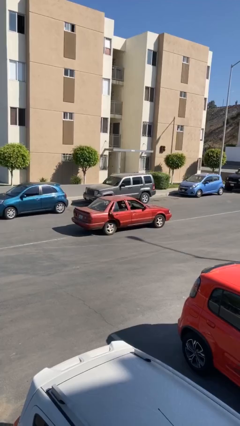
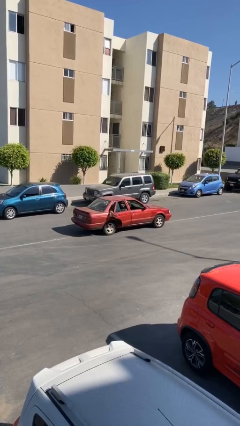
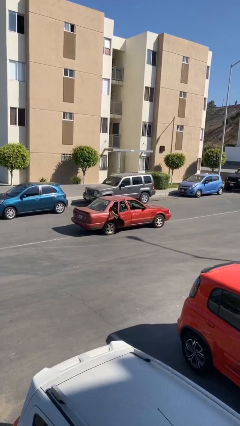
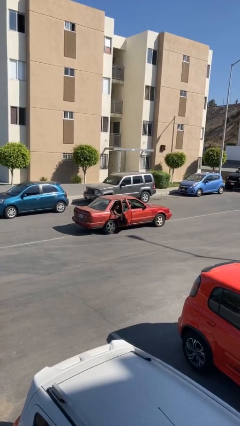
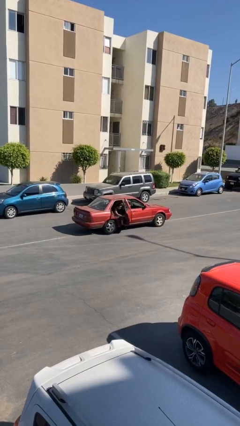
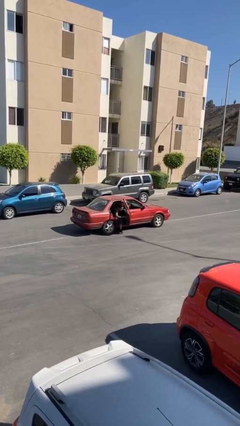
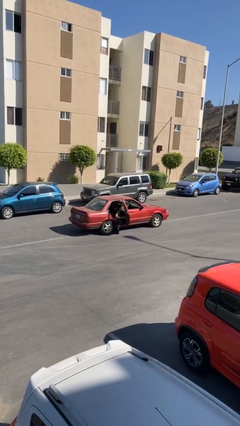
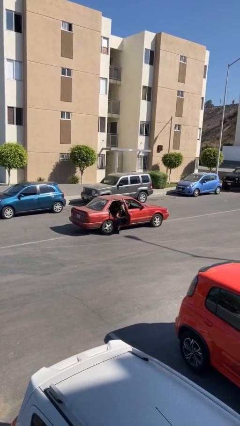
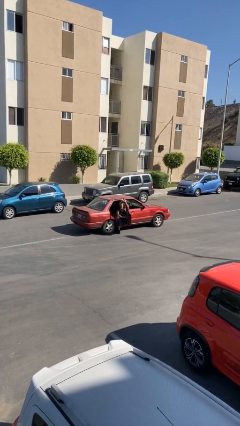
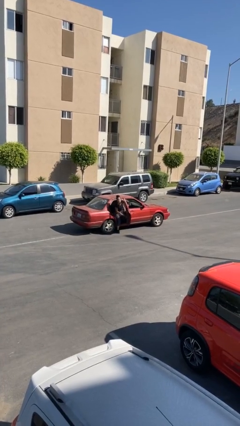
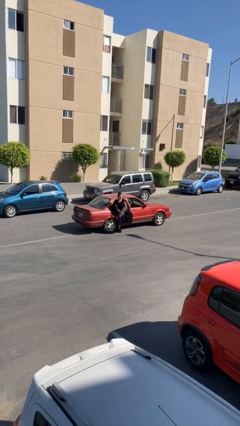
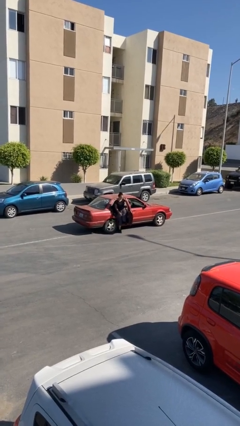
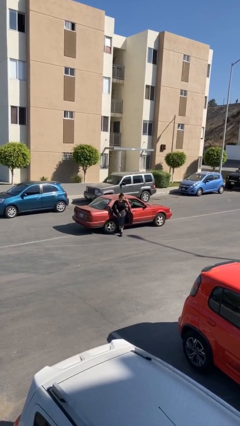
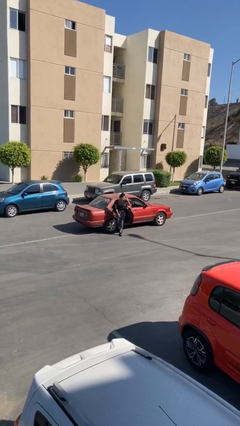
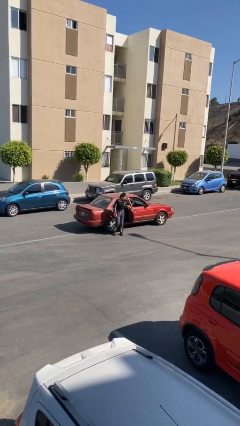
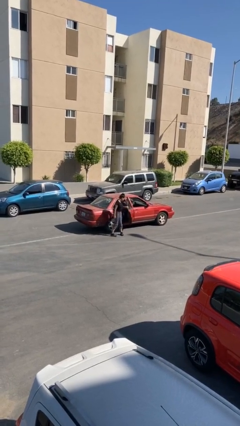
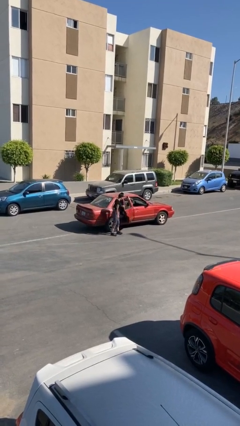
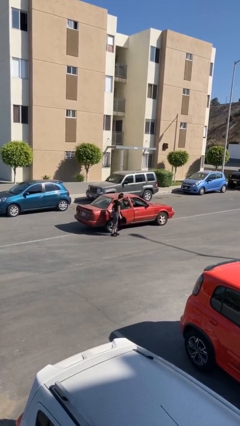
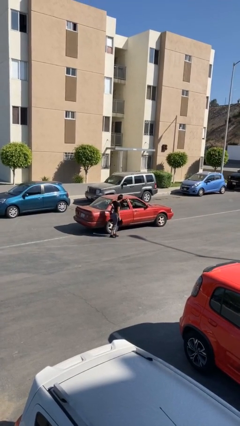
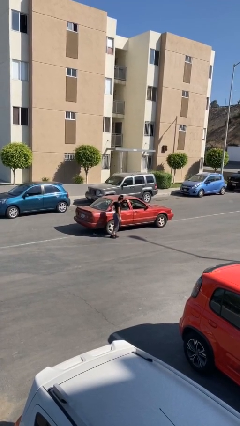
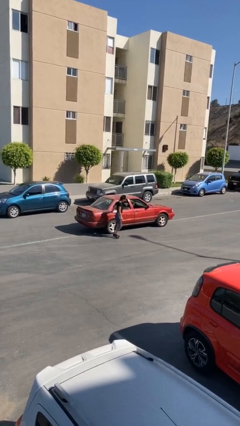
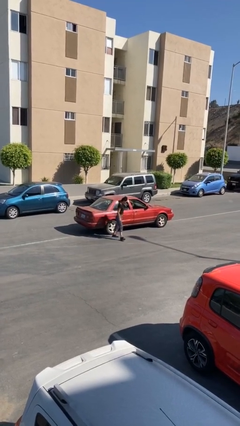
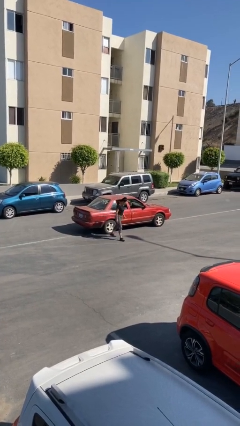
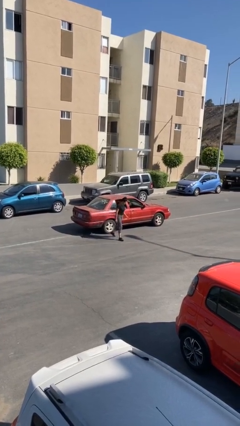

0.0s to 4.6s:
car drops off person

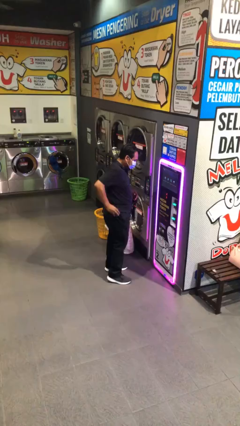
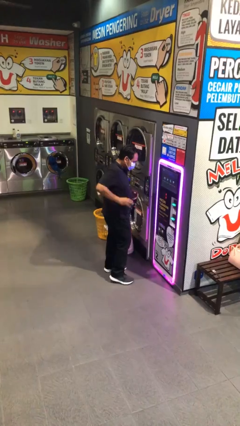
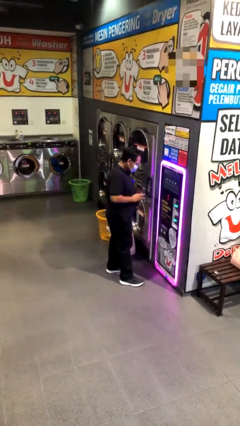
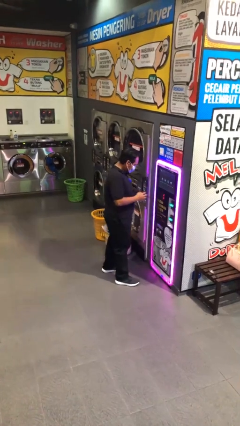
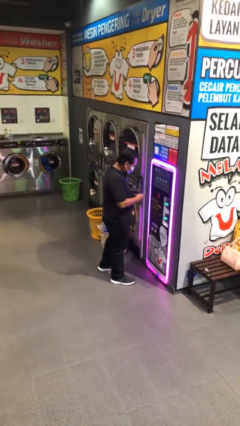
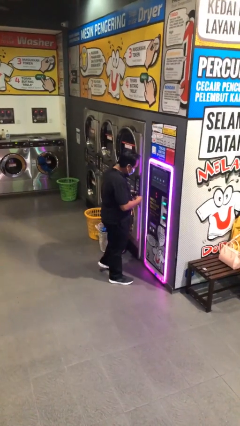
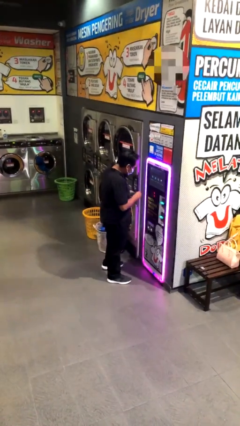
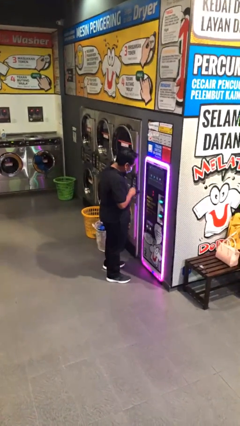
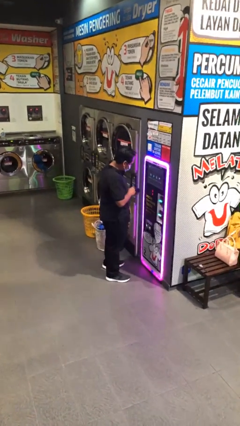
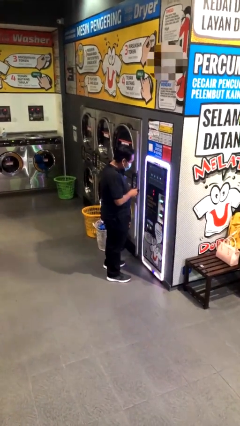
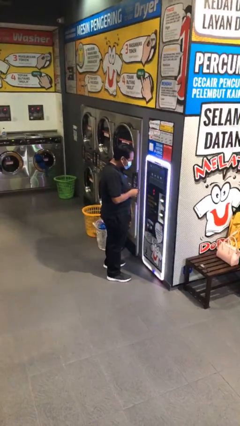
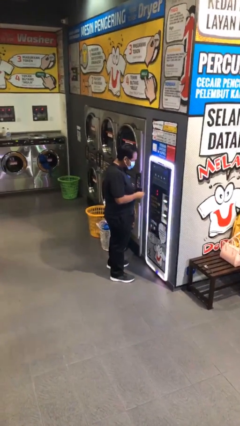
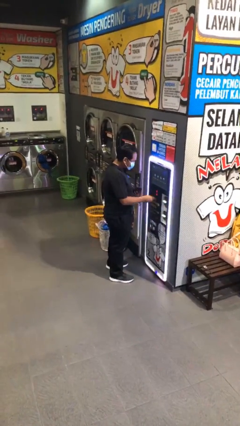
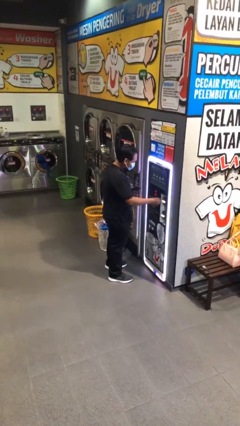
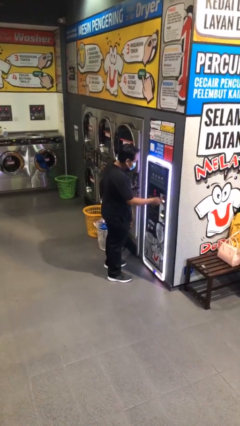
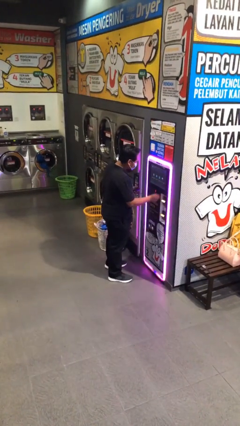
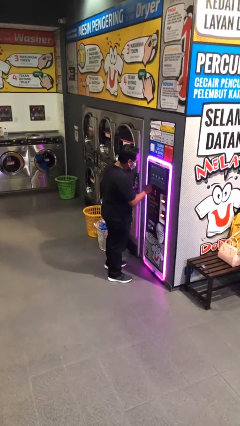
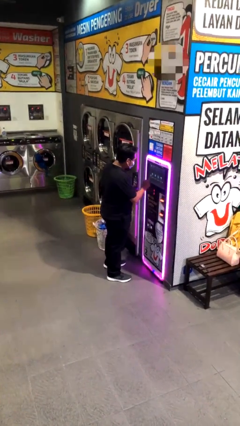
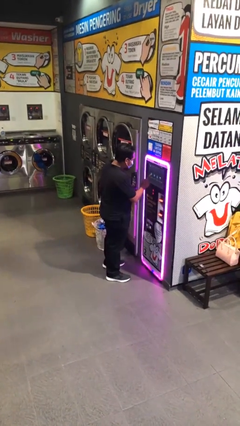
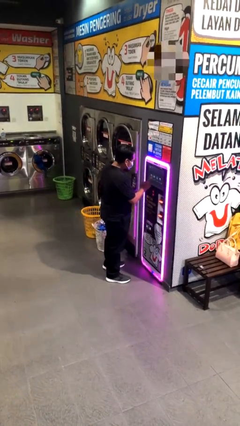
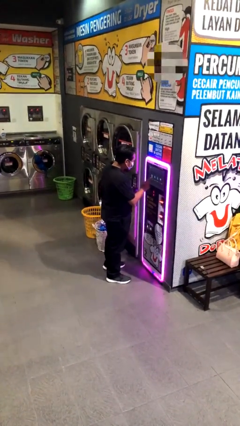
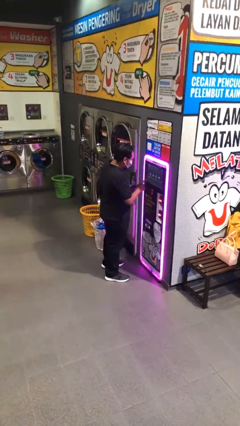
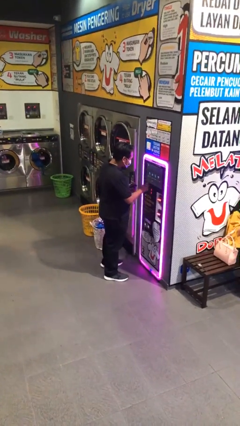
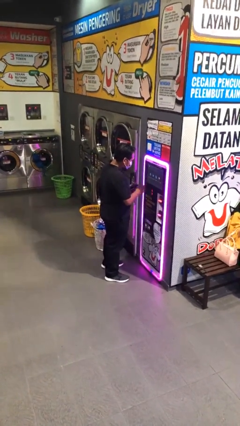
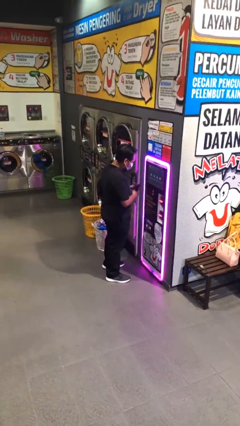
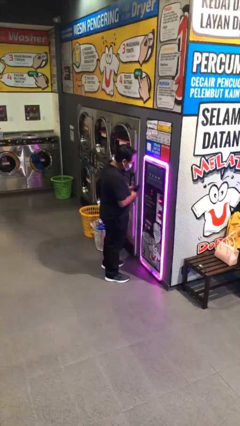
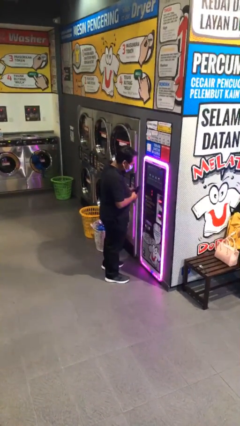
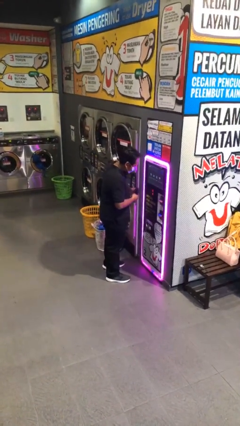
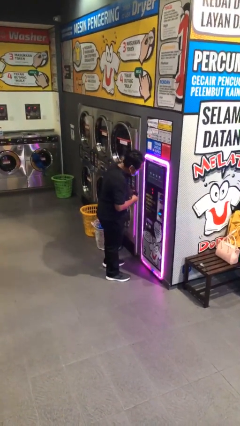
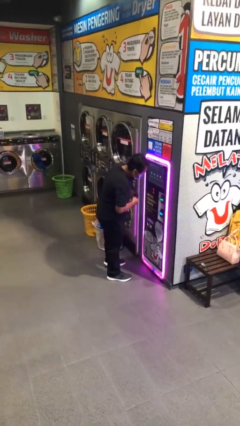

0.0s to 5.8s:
person talks to person

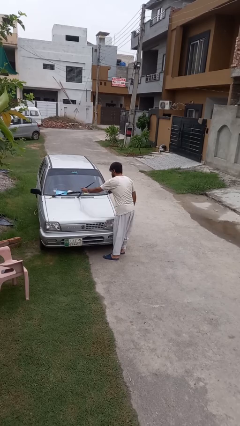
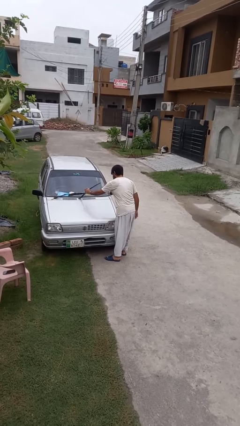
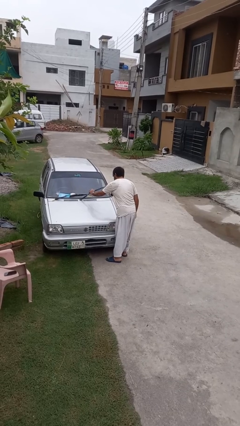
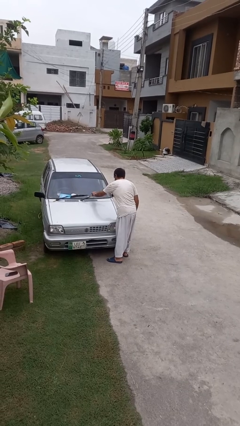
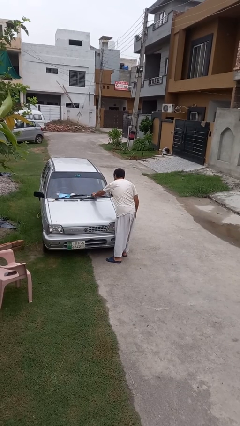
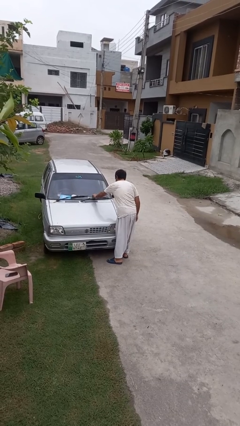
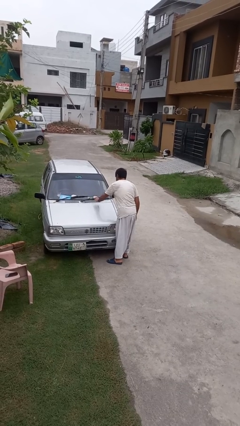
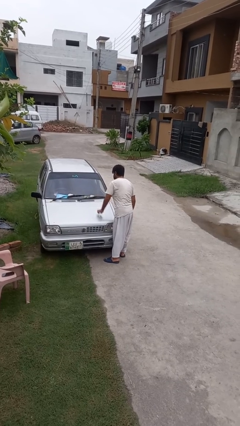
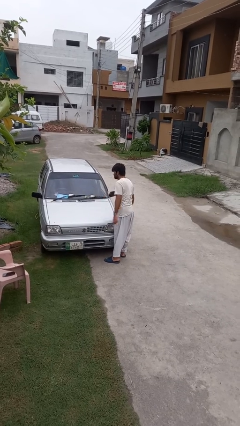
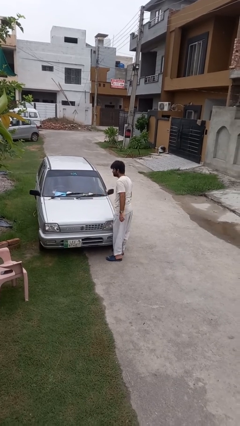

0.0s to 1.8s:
person flips down car wipers

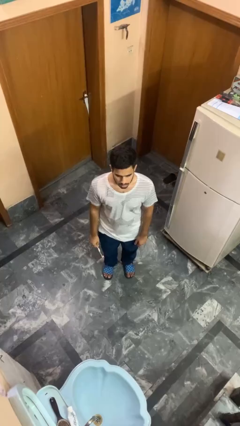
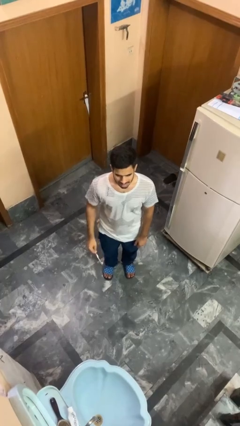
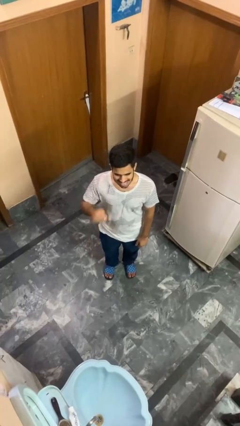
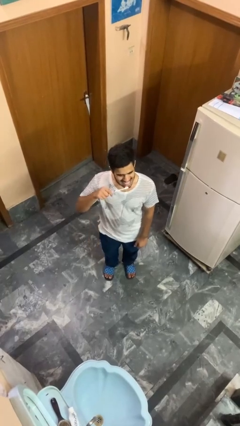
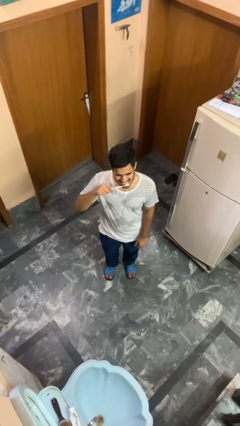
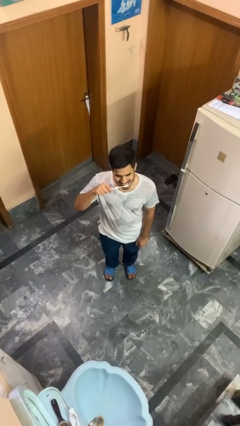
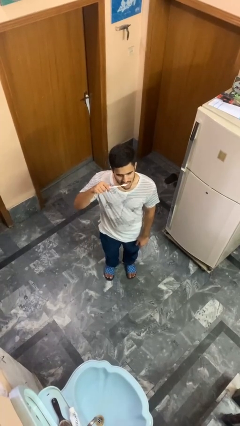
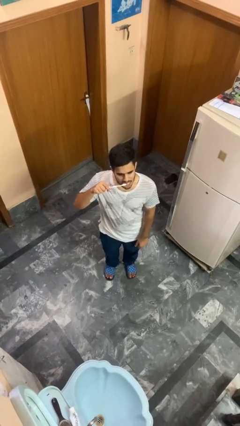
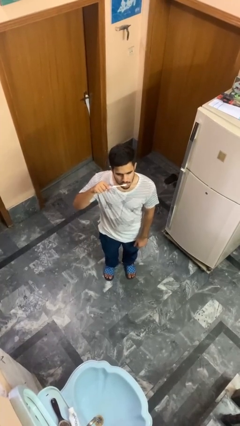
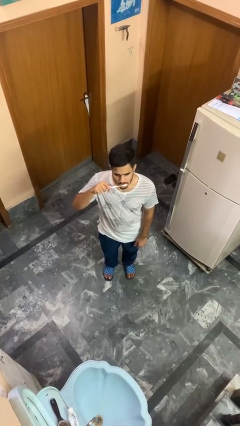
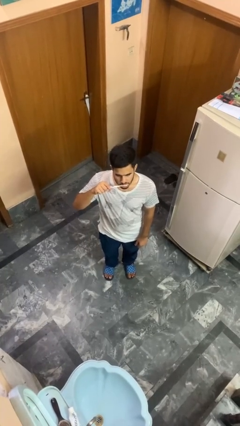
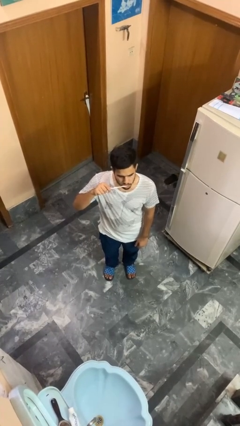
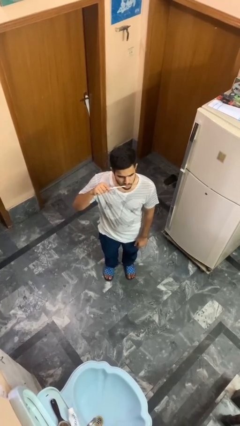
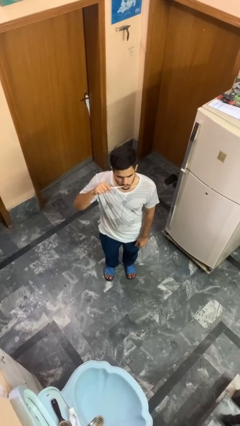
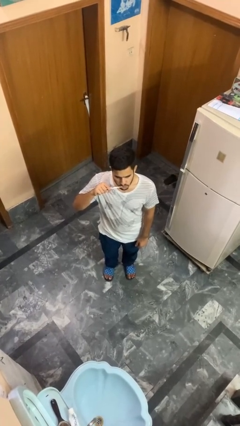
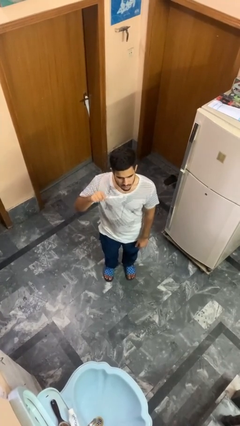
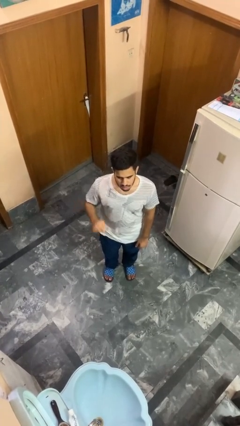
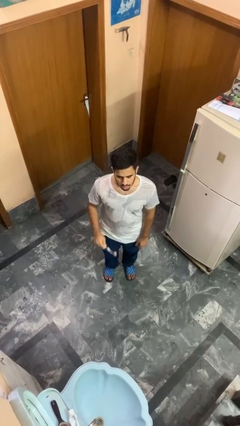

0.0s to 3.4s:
person brushes teeth

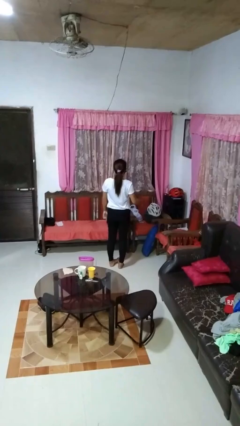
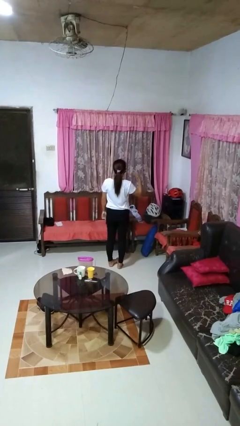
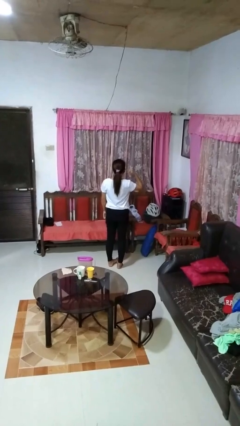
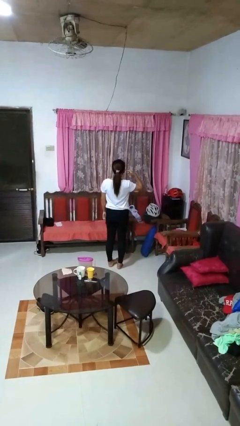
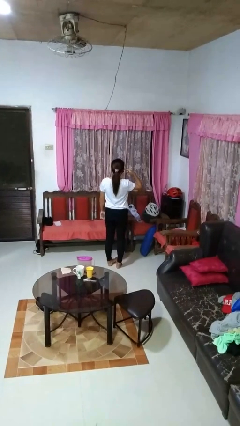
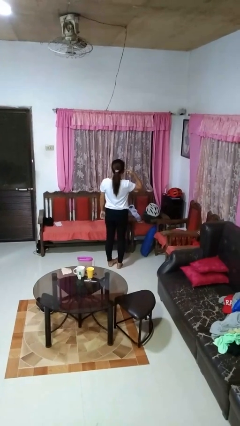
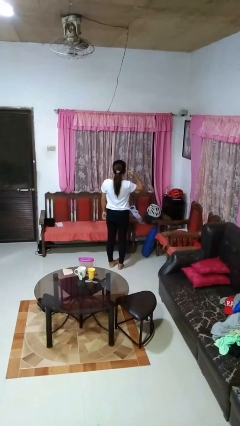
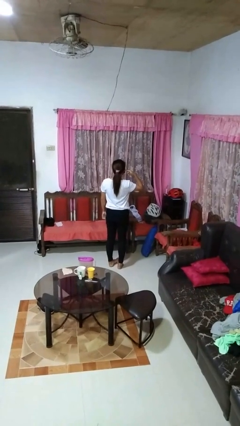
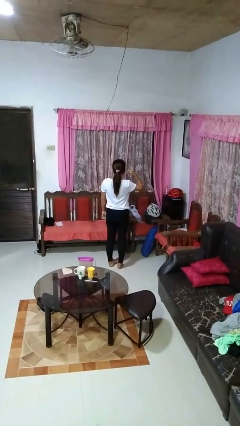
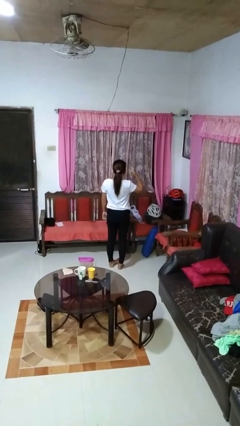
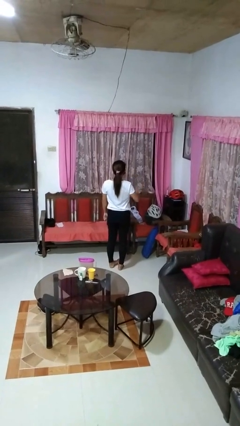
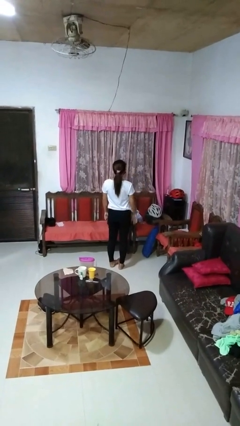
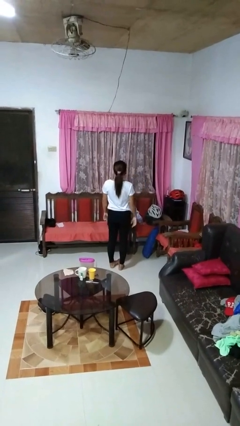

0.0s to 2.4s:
person gestures listen closely
